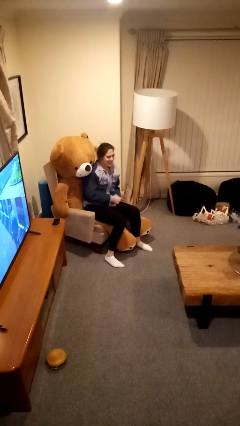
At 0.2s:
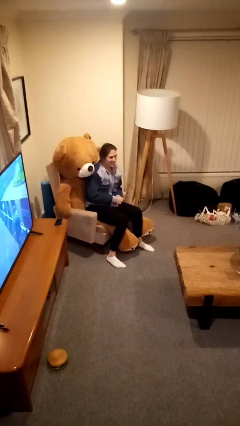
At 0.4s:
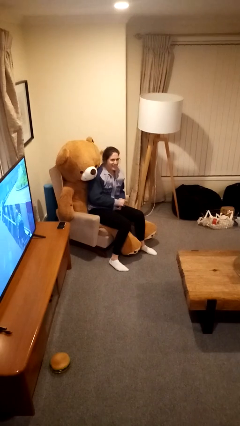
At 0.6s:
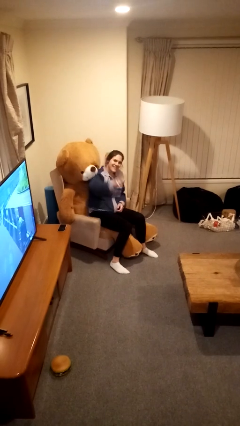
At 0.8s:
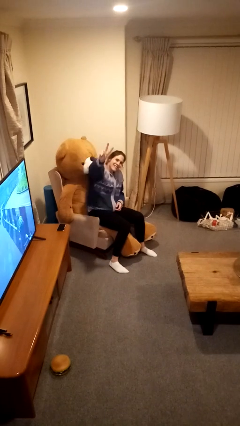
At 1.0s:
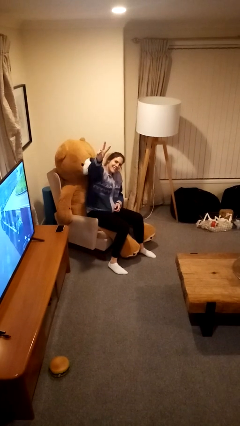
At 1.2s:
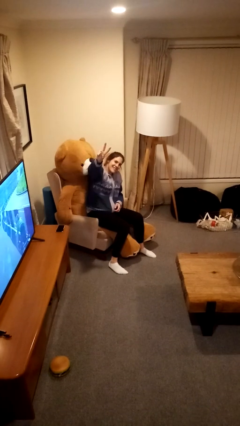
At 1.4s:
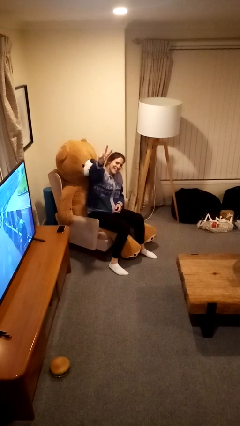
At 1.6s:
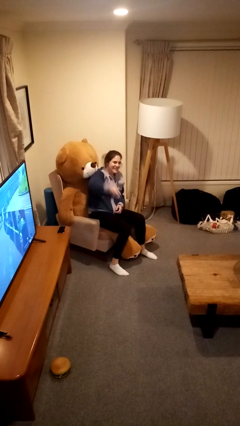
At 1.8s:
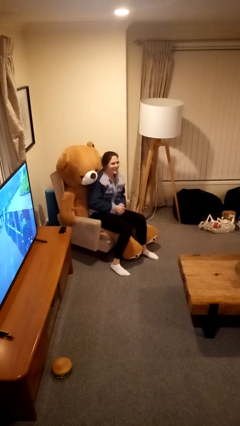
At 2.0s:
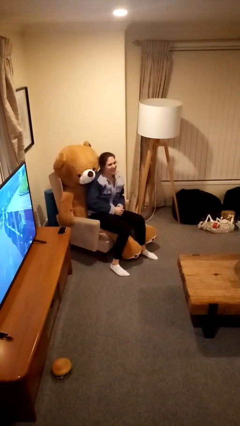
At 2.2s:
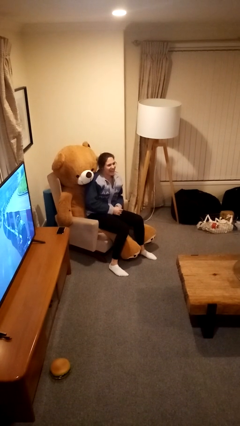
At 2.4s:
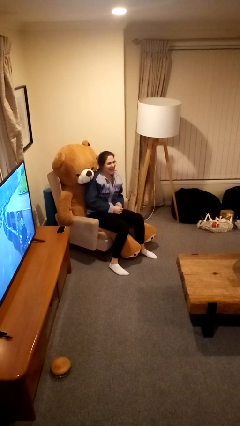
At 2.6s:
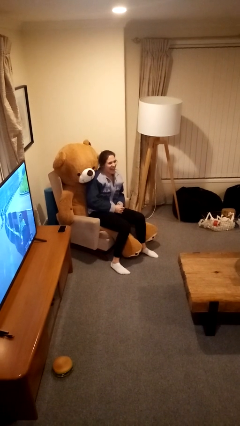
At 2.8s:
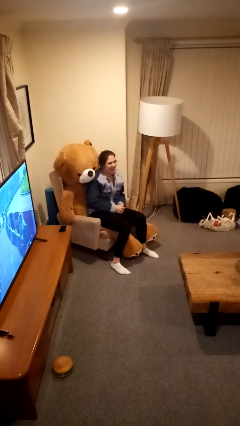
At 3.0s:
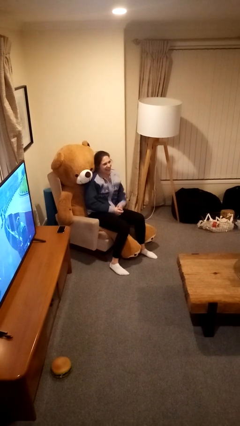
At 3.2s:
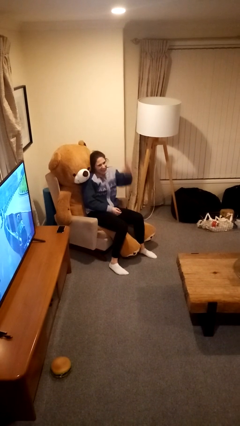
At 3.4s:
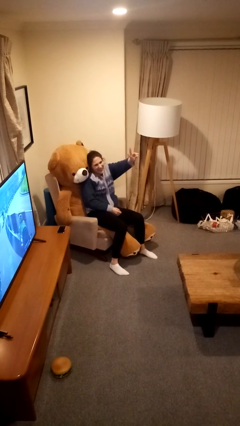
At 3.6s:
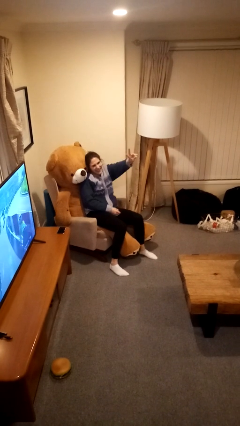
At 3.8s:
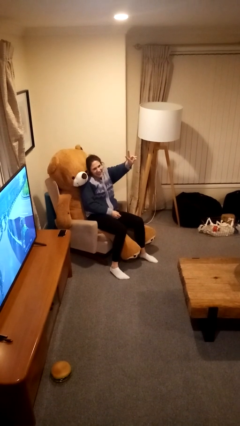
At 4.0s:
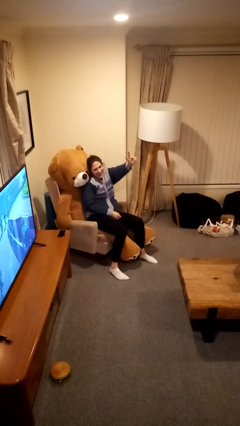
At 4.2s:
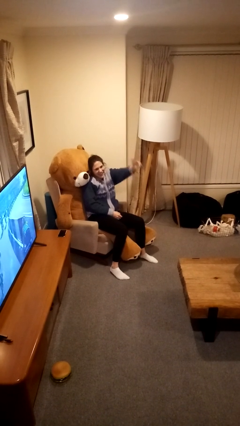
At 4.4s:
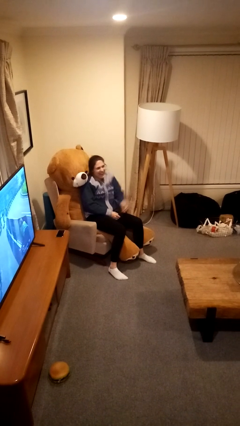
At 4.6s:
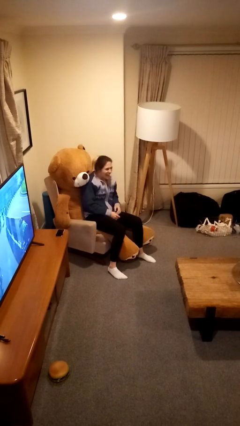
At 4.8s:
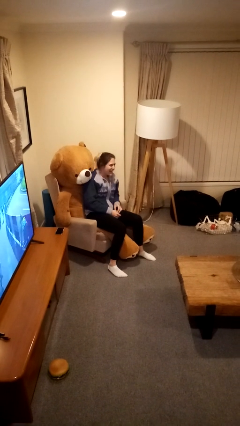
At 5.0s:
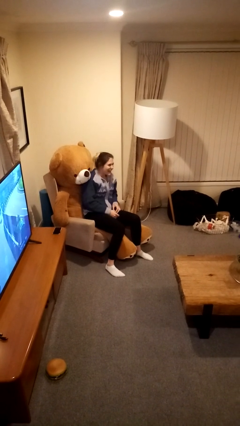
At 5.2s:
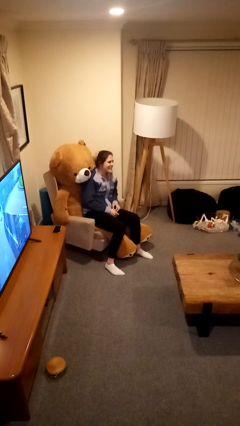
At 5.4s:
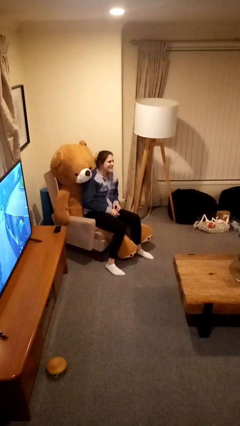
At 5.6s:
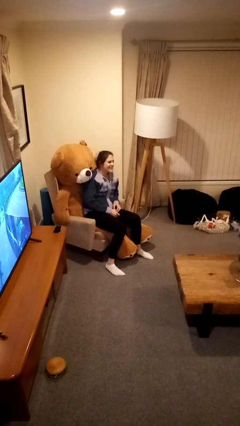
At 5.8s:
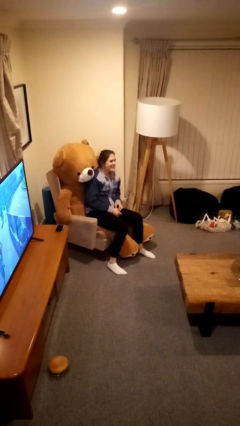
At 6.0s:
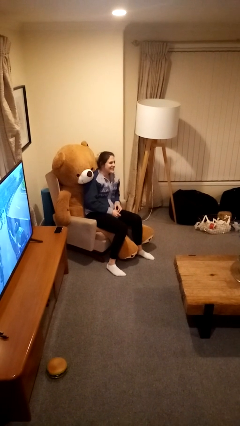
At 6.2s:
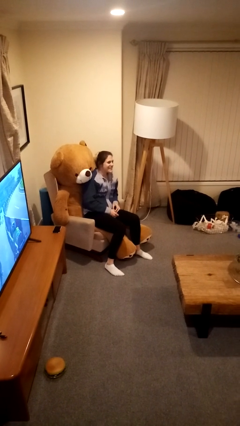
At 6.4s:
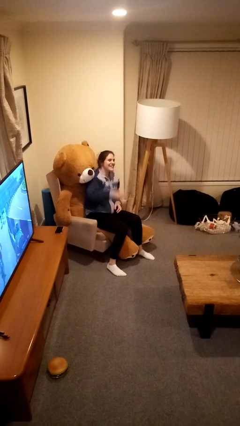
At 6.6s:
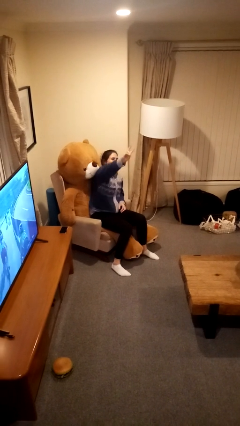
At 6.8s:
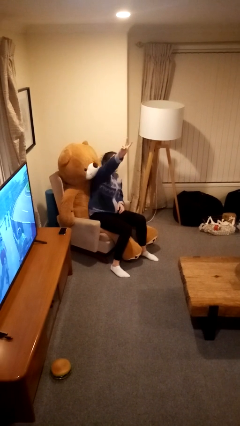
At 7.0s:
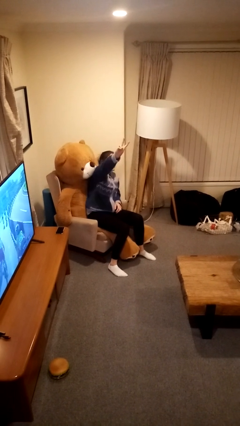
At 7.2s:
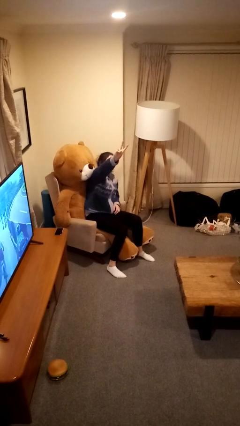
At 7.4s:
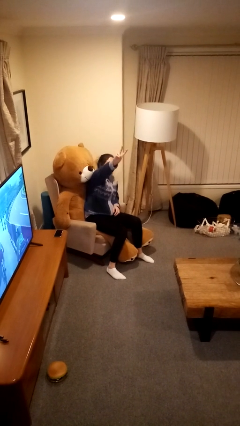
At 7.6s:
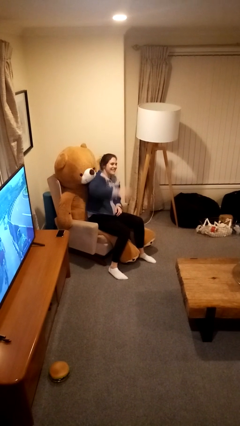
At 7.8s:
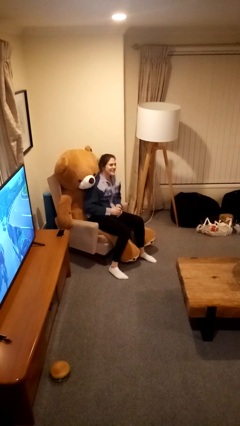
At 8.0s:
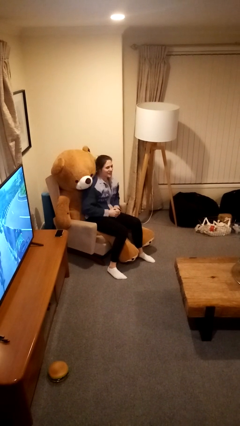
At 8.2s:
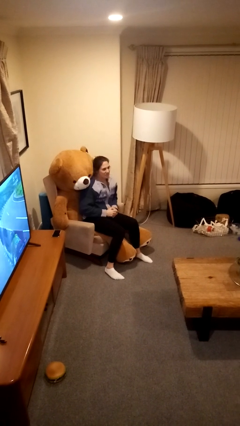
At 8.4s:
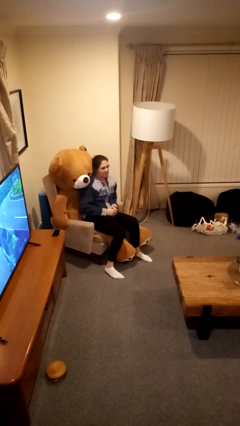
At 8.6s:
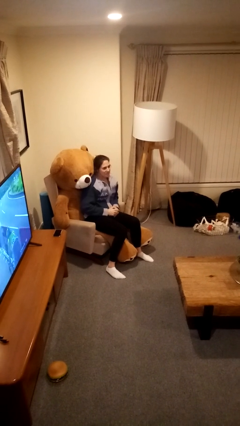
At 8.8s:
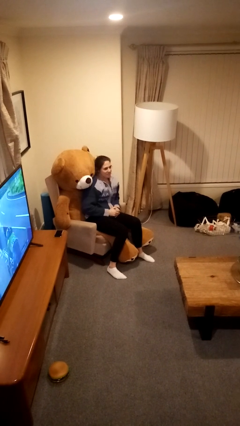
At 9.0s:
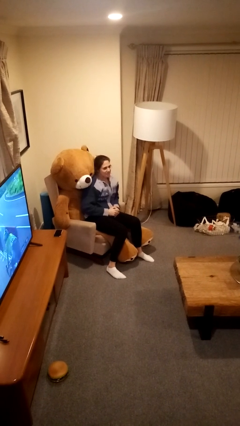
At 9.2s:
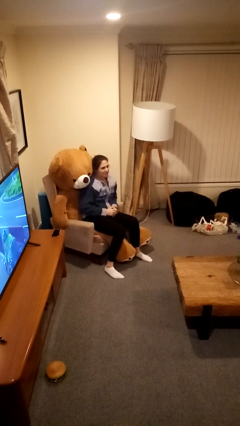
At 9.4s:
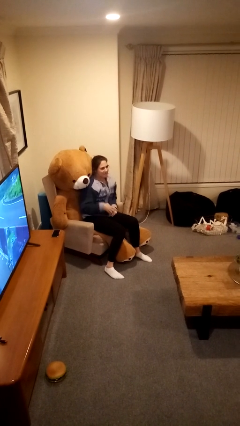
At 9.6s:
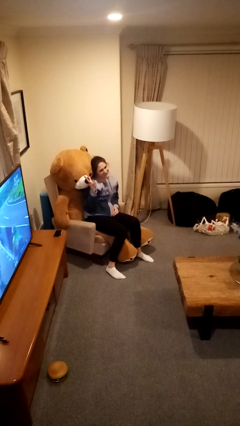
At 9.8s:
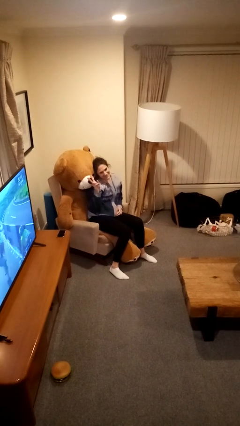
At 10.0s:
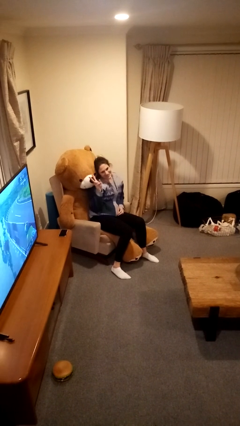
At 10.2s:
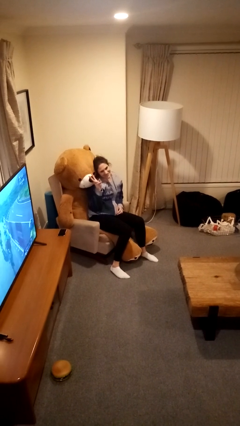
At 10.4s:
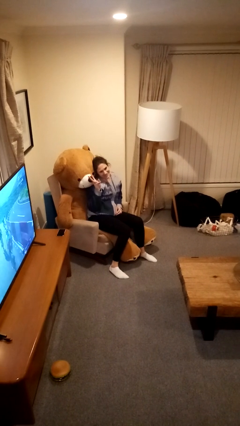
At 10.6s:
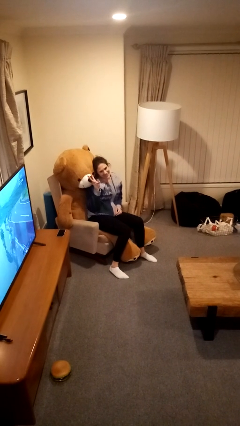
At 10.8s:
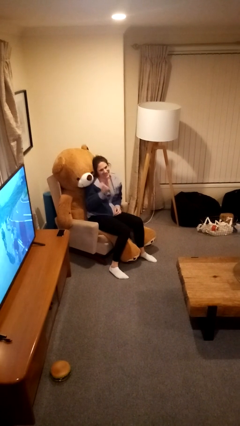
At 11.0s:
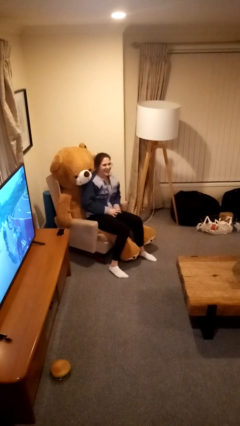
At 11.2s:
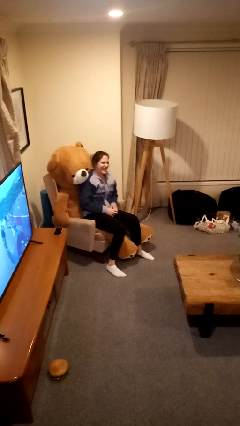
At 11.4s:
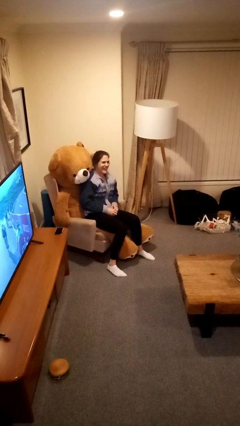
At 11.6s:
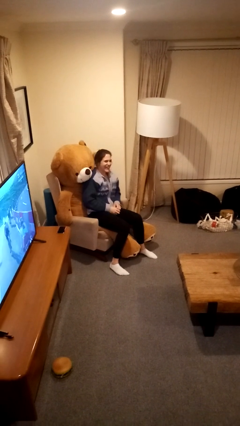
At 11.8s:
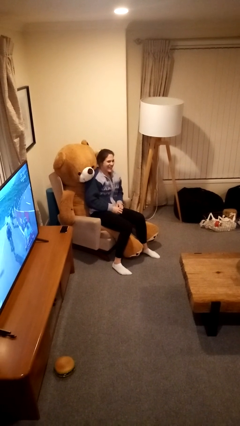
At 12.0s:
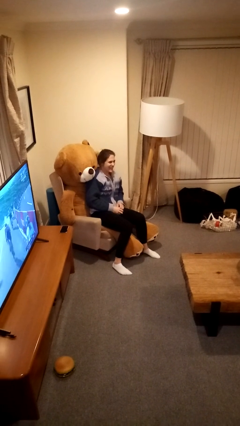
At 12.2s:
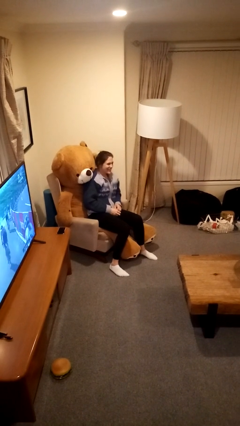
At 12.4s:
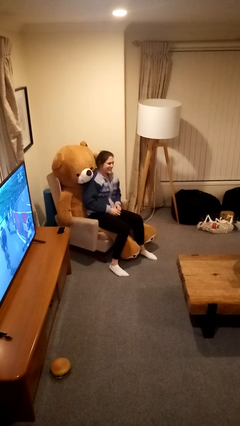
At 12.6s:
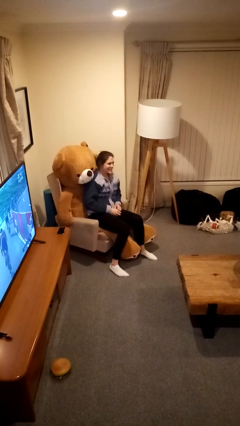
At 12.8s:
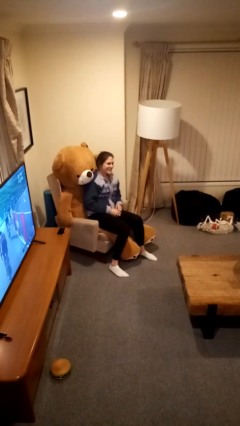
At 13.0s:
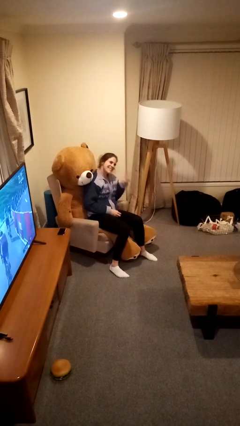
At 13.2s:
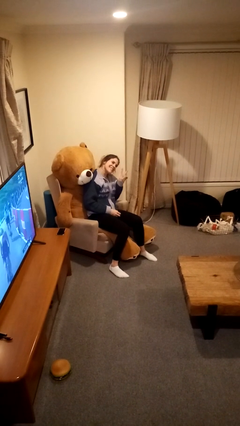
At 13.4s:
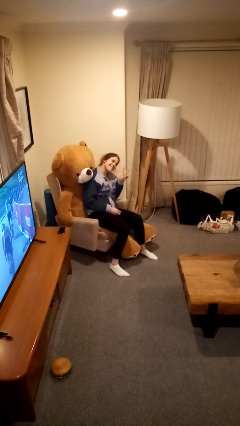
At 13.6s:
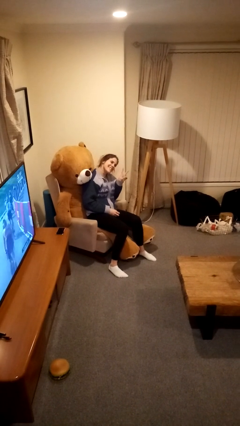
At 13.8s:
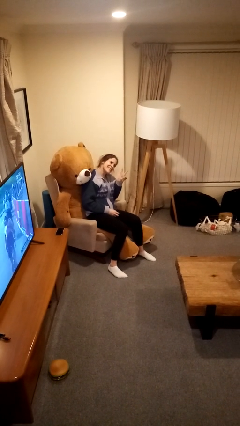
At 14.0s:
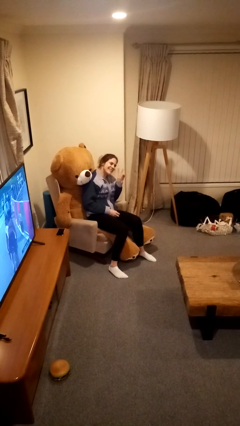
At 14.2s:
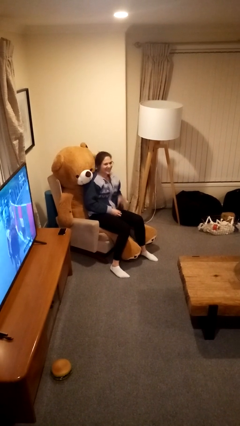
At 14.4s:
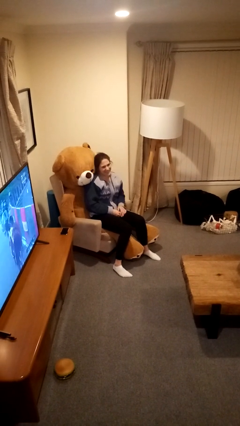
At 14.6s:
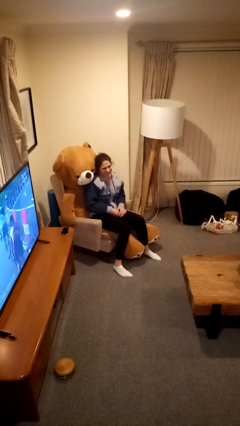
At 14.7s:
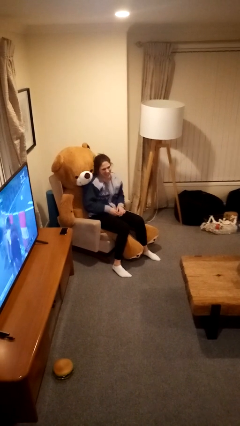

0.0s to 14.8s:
person gestures peace

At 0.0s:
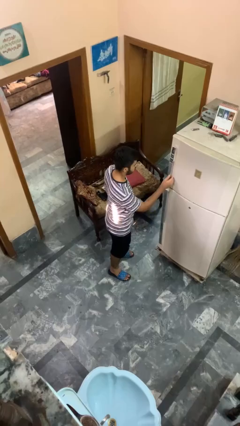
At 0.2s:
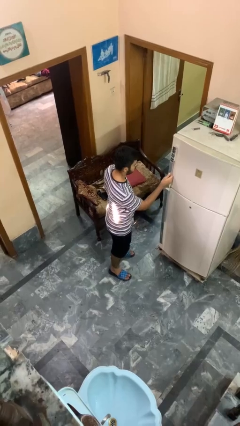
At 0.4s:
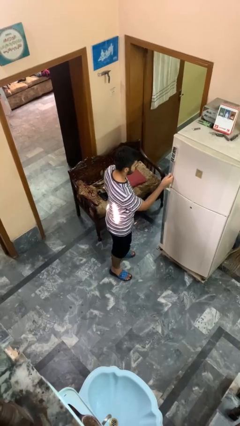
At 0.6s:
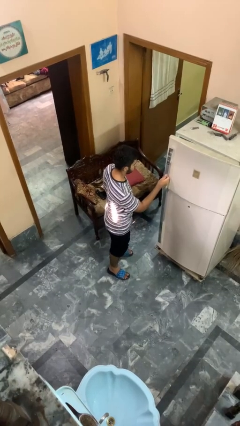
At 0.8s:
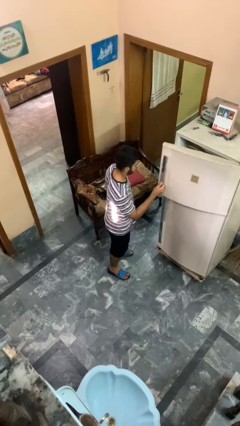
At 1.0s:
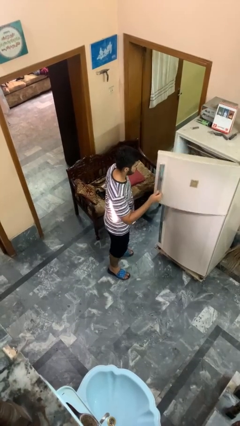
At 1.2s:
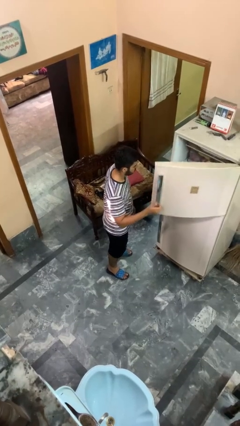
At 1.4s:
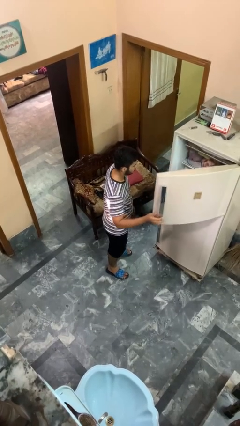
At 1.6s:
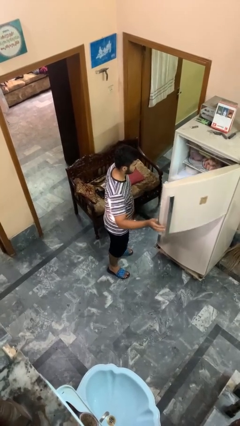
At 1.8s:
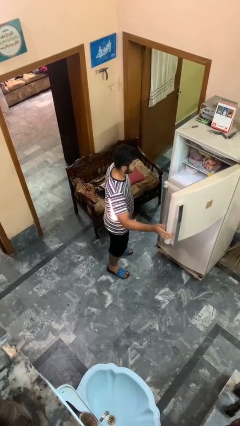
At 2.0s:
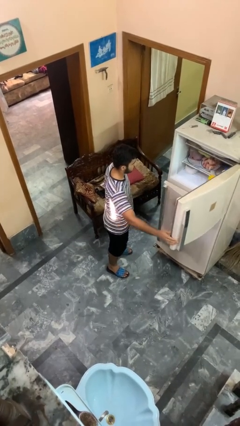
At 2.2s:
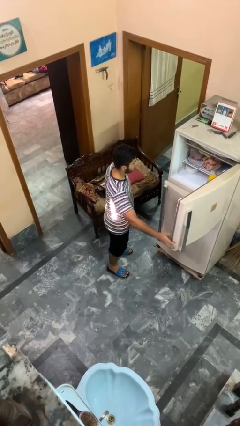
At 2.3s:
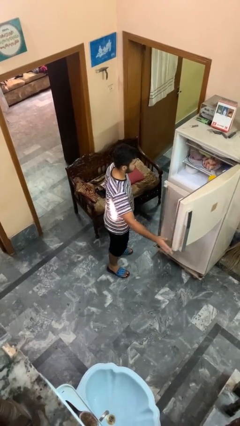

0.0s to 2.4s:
person opens refrigerator

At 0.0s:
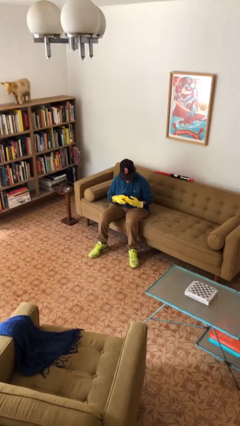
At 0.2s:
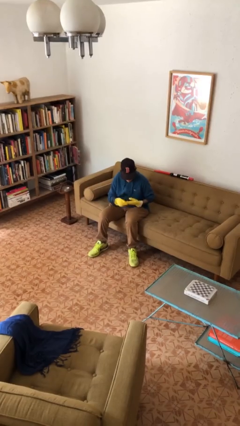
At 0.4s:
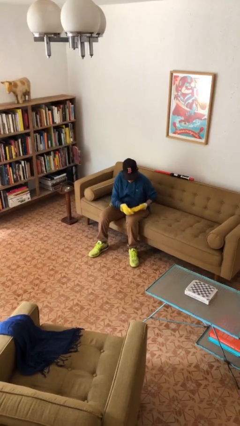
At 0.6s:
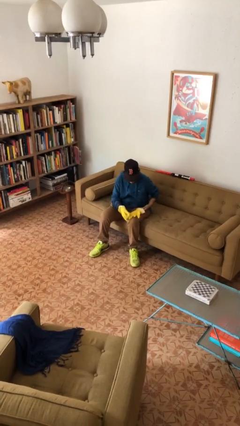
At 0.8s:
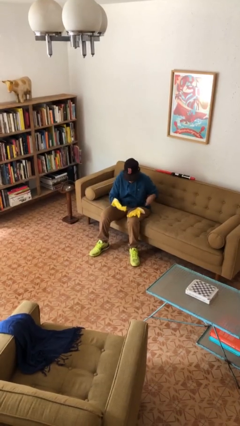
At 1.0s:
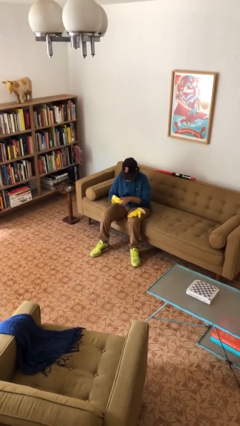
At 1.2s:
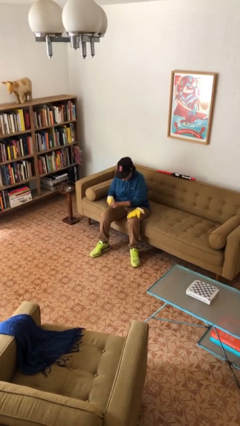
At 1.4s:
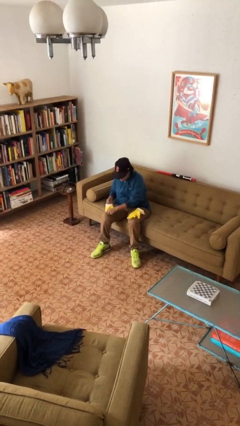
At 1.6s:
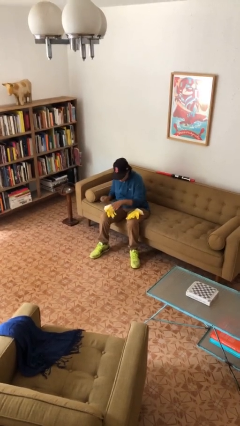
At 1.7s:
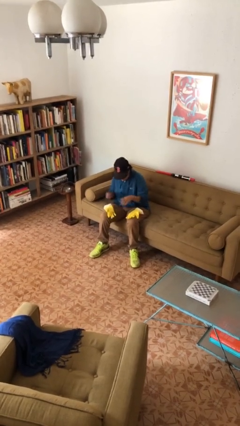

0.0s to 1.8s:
person takes off gloves
